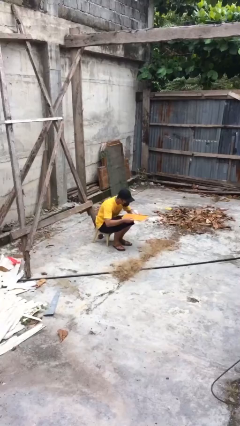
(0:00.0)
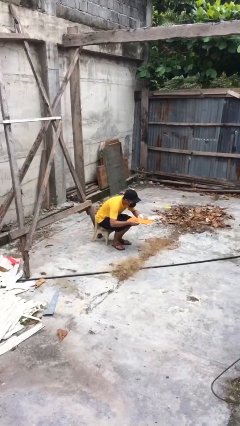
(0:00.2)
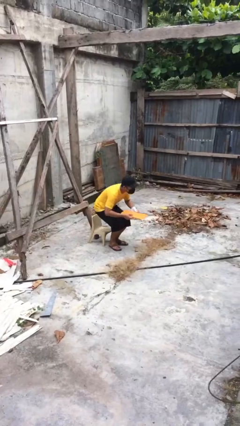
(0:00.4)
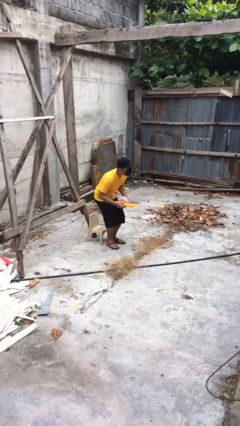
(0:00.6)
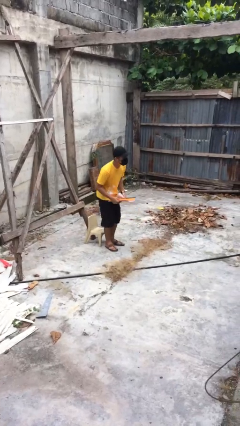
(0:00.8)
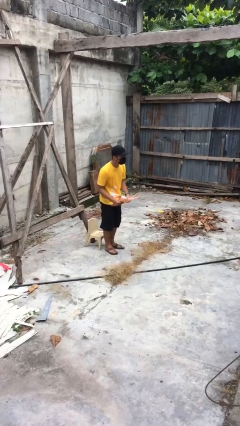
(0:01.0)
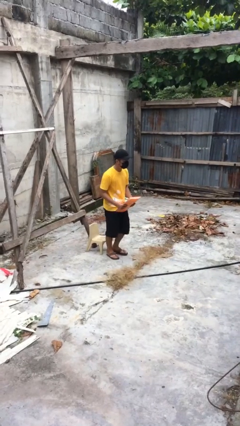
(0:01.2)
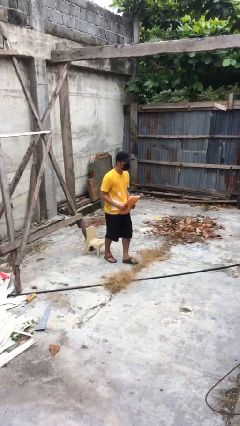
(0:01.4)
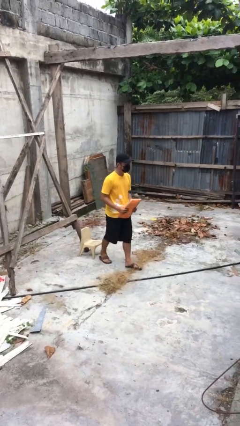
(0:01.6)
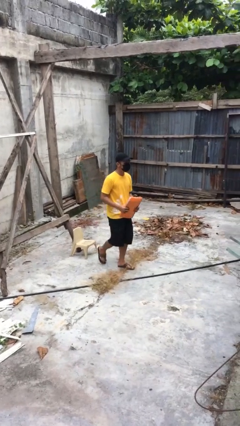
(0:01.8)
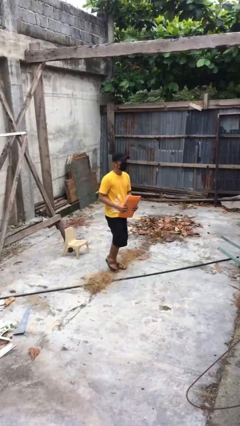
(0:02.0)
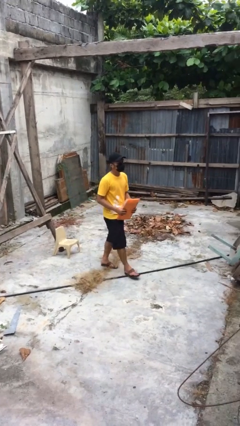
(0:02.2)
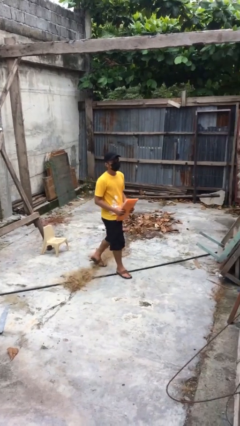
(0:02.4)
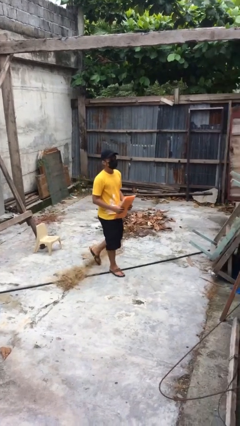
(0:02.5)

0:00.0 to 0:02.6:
person stands up

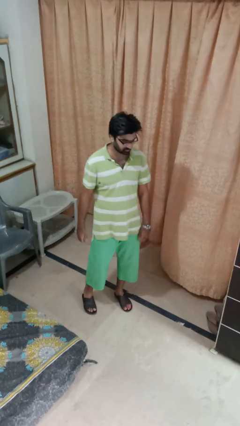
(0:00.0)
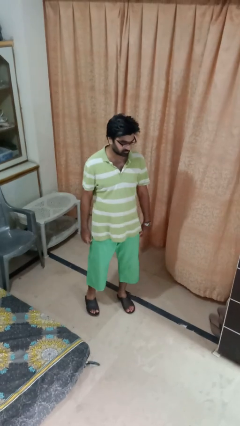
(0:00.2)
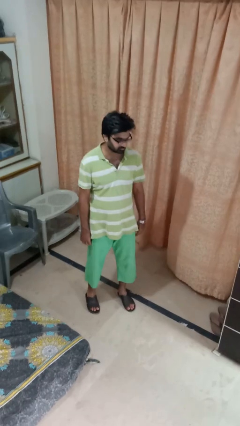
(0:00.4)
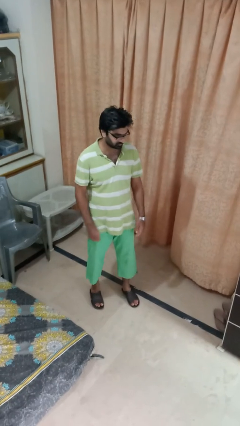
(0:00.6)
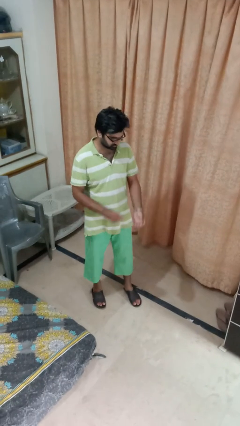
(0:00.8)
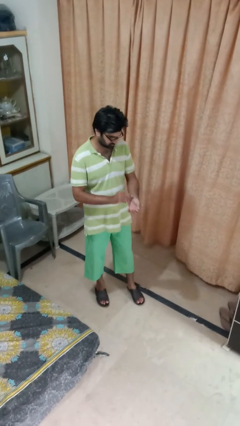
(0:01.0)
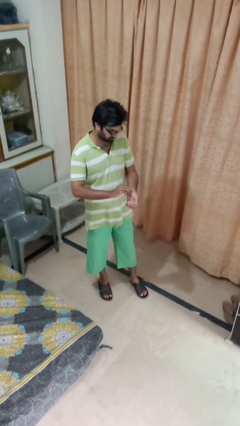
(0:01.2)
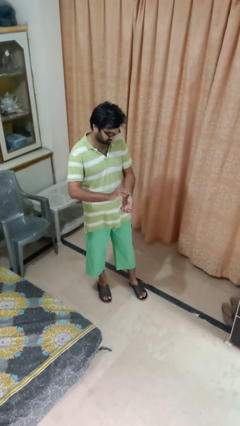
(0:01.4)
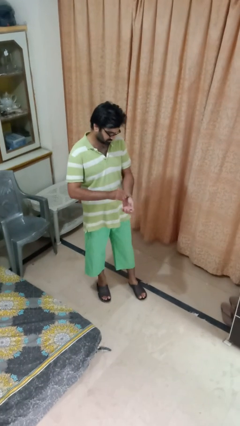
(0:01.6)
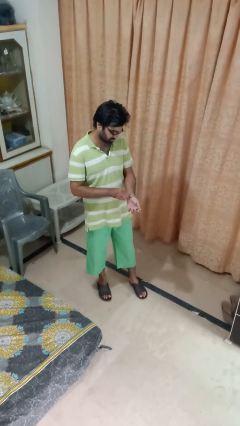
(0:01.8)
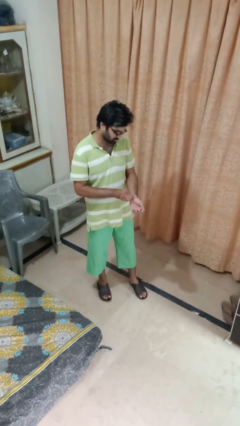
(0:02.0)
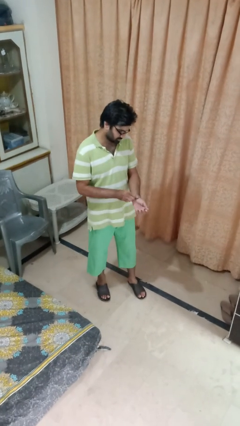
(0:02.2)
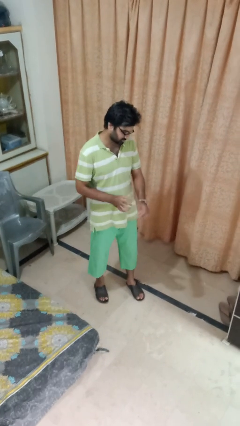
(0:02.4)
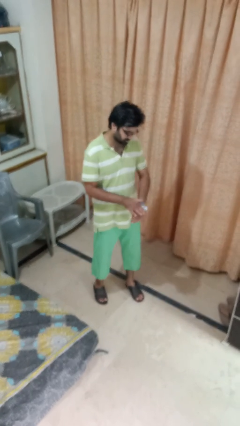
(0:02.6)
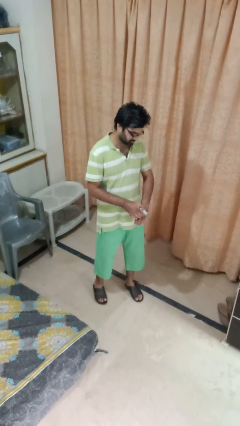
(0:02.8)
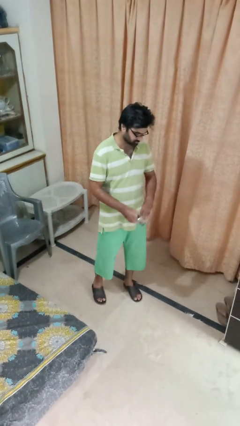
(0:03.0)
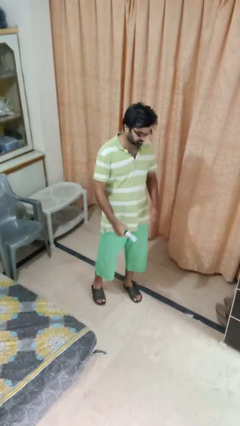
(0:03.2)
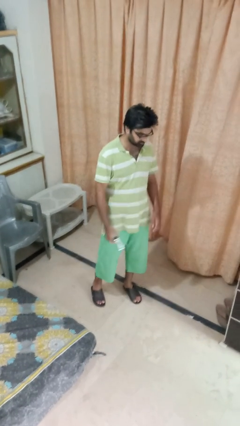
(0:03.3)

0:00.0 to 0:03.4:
person takes off wristwatch

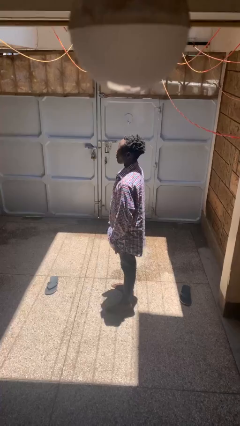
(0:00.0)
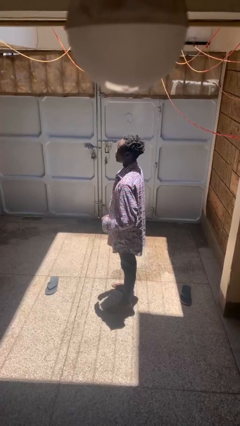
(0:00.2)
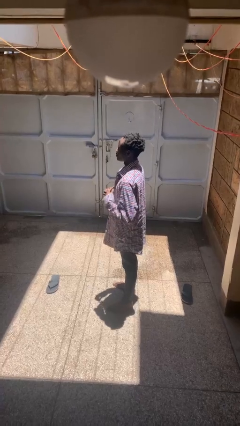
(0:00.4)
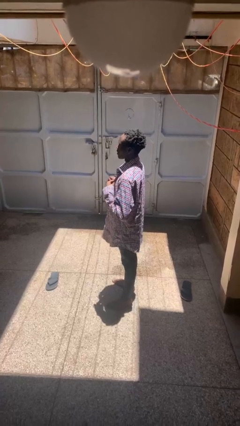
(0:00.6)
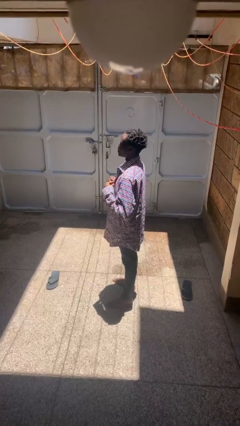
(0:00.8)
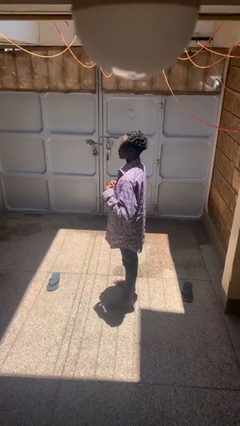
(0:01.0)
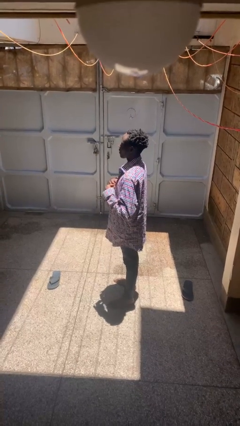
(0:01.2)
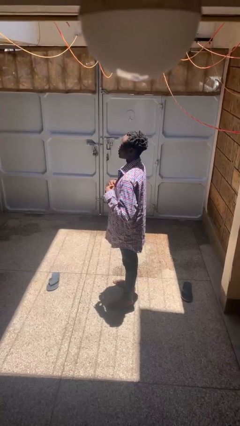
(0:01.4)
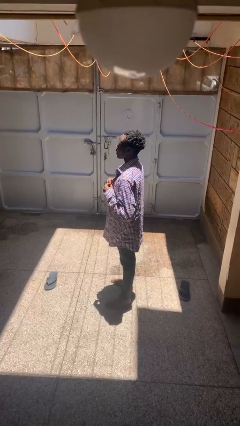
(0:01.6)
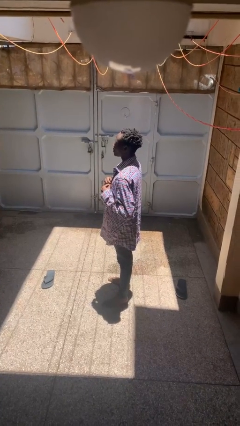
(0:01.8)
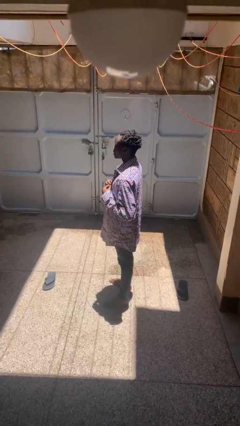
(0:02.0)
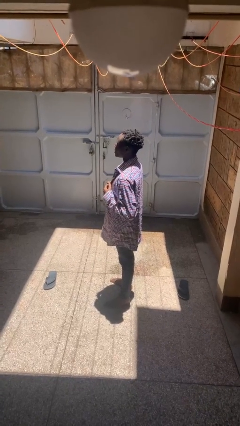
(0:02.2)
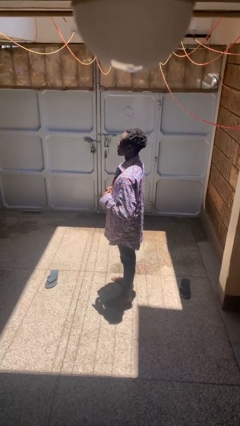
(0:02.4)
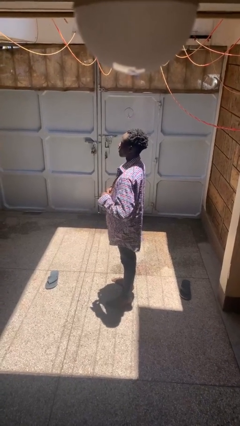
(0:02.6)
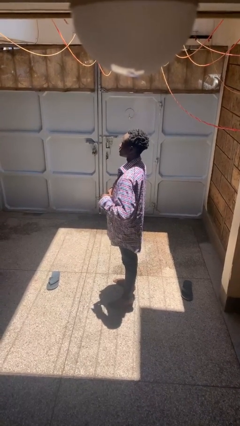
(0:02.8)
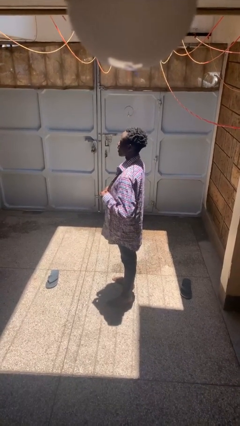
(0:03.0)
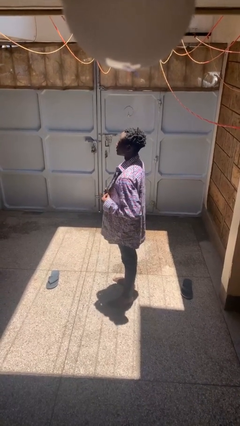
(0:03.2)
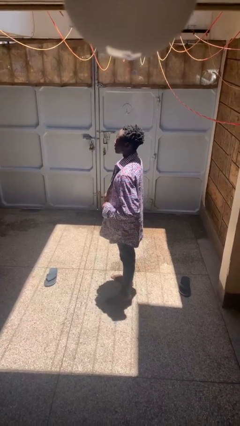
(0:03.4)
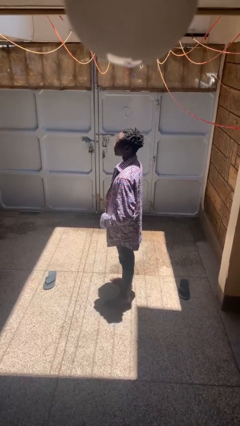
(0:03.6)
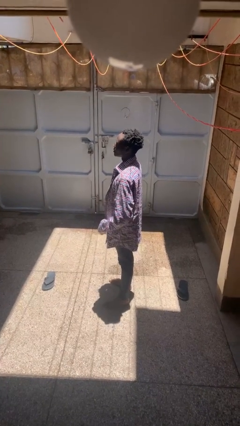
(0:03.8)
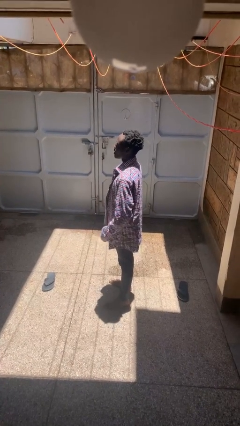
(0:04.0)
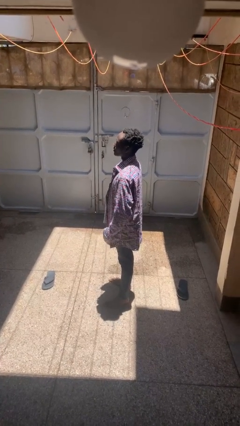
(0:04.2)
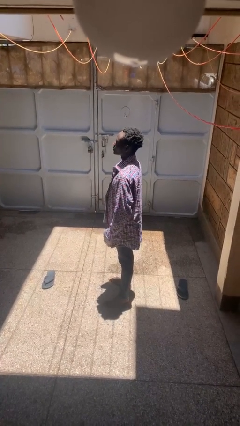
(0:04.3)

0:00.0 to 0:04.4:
person buttons shirt

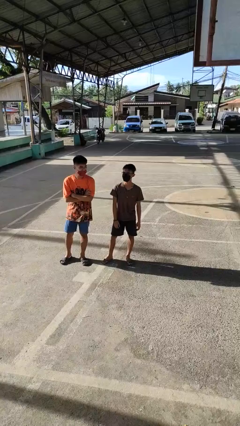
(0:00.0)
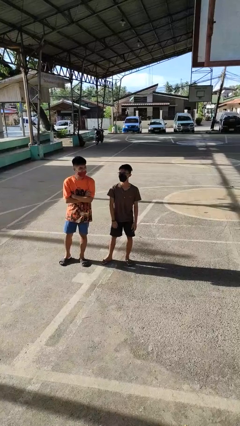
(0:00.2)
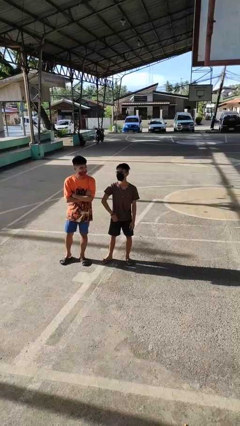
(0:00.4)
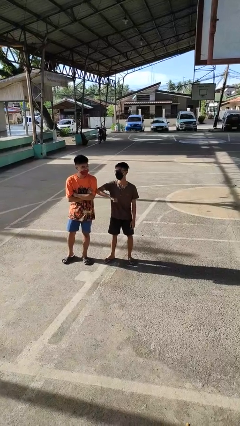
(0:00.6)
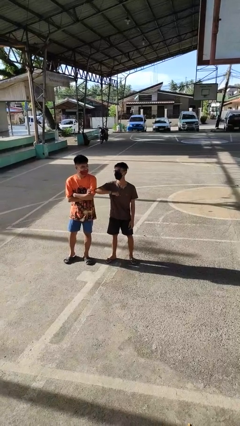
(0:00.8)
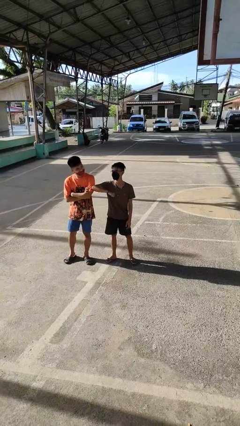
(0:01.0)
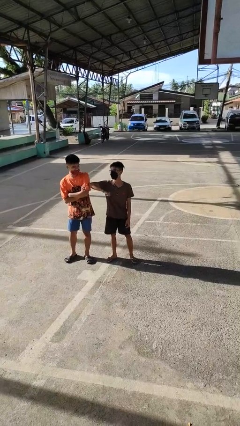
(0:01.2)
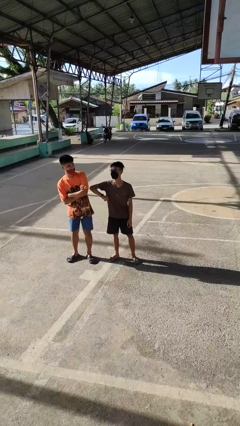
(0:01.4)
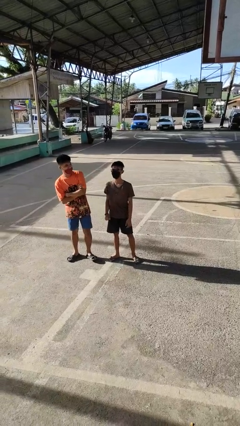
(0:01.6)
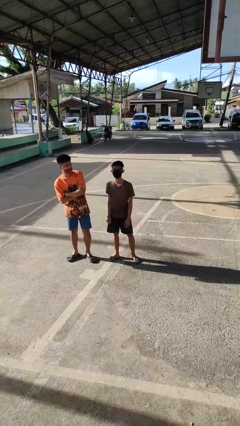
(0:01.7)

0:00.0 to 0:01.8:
person nudges person with elbow

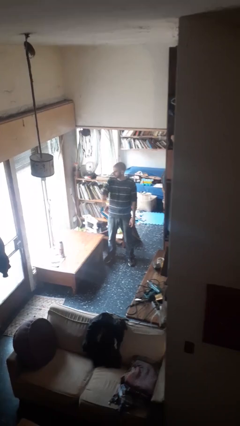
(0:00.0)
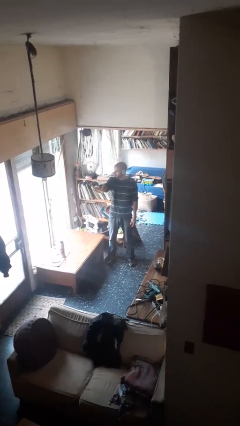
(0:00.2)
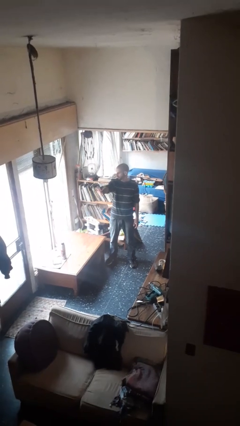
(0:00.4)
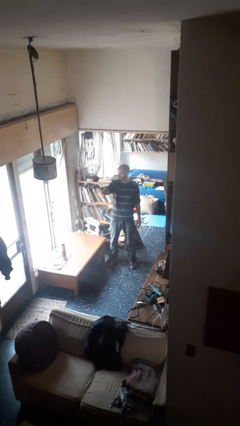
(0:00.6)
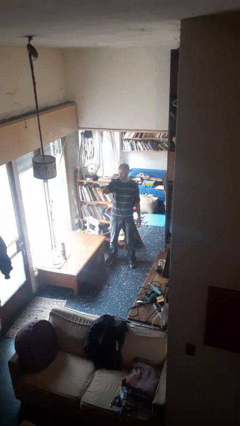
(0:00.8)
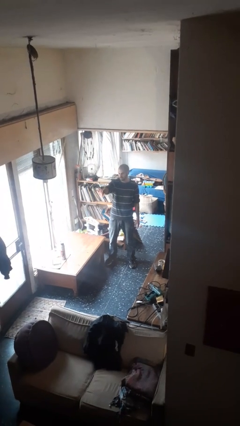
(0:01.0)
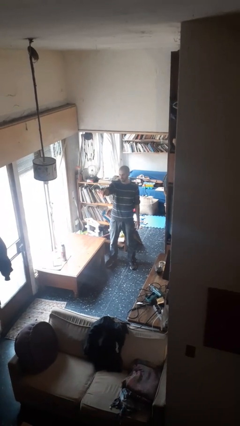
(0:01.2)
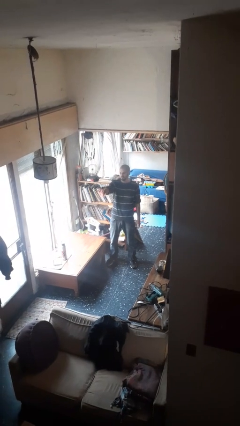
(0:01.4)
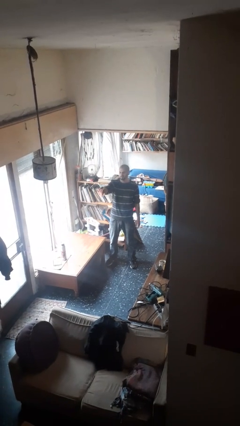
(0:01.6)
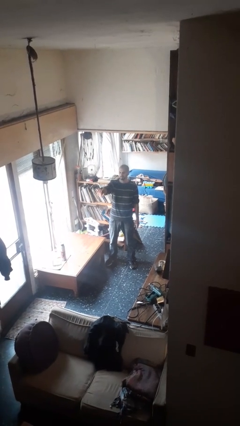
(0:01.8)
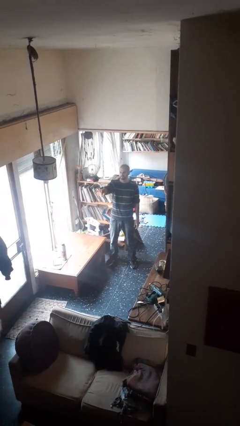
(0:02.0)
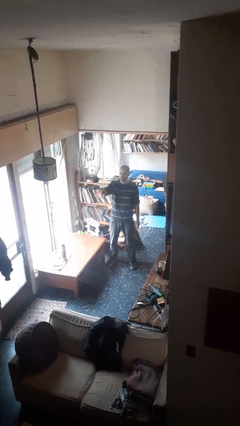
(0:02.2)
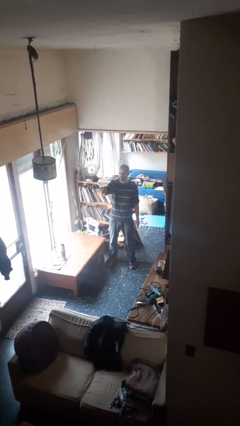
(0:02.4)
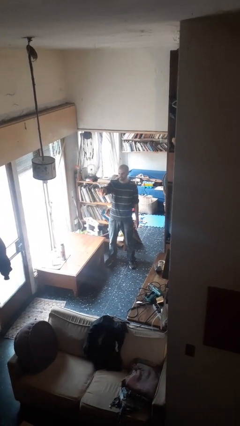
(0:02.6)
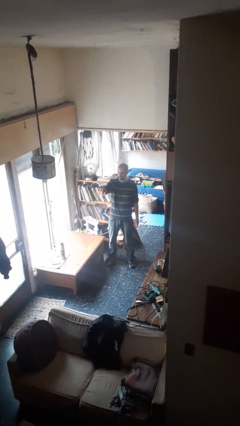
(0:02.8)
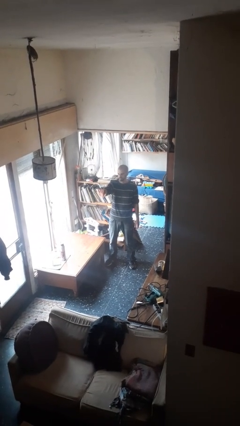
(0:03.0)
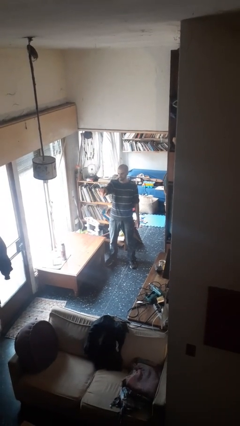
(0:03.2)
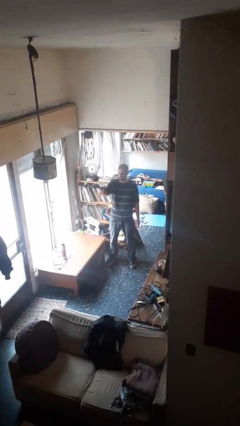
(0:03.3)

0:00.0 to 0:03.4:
person gestures stop

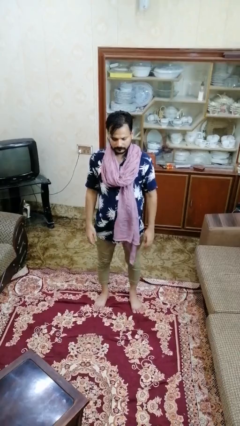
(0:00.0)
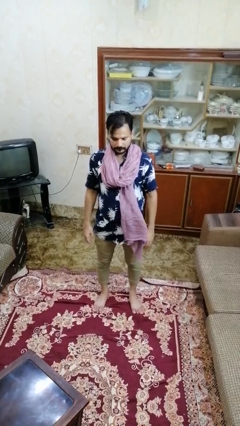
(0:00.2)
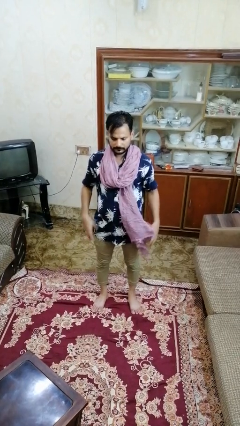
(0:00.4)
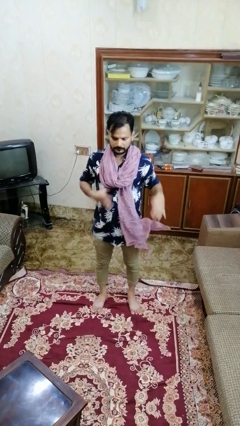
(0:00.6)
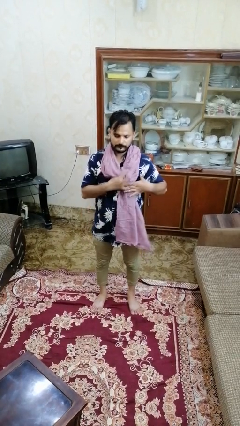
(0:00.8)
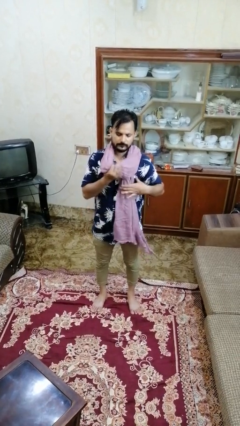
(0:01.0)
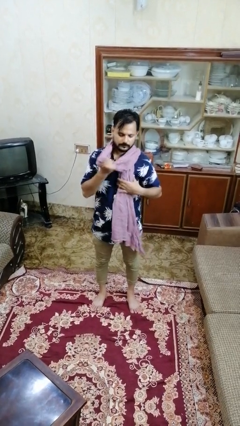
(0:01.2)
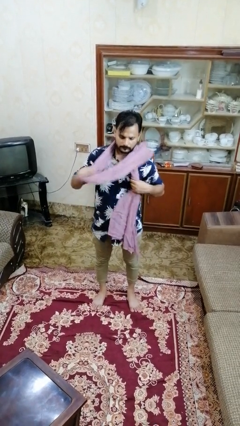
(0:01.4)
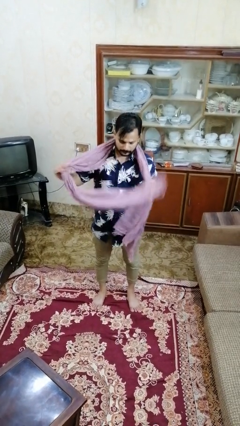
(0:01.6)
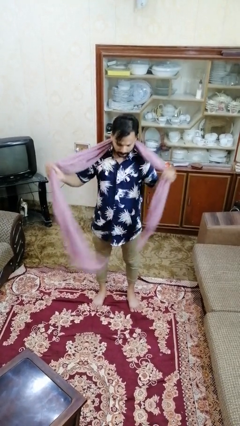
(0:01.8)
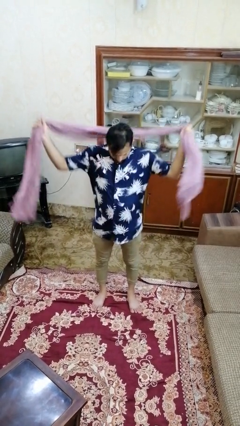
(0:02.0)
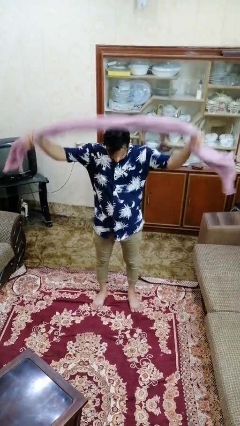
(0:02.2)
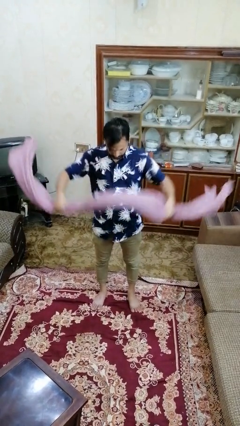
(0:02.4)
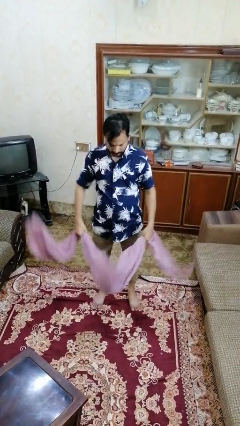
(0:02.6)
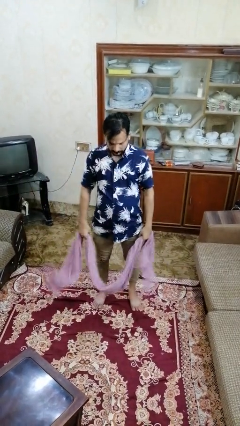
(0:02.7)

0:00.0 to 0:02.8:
person takes off scarf
